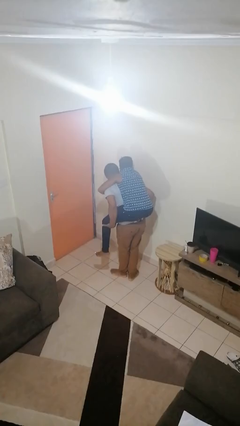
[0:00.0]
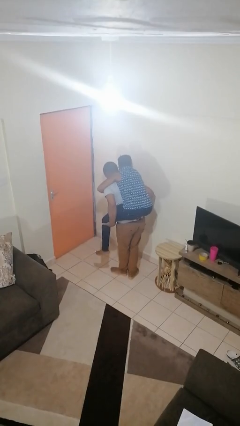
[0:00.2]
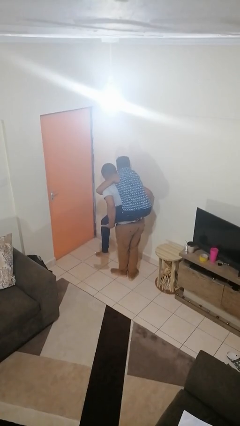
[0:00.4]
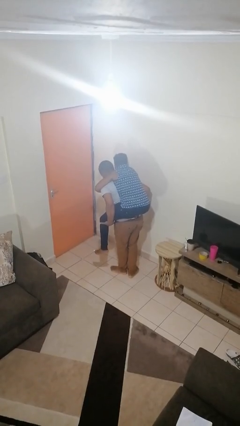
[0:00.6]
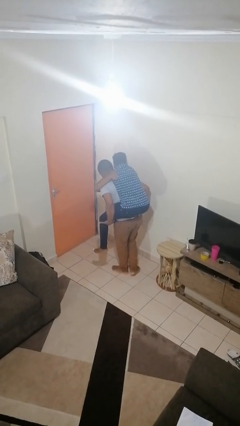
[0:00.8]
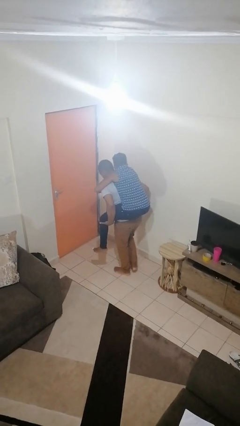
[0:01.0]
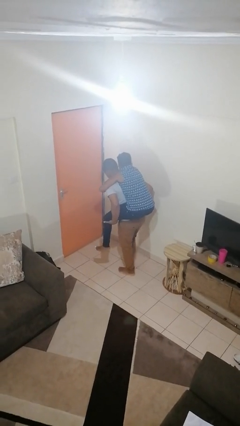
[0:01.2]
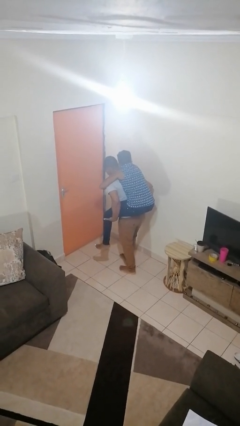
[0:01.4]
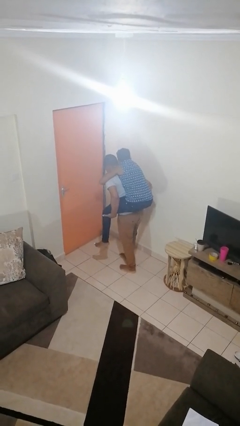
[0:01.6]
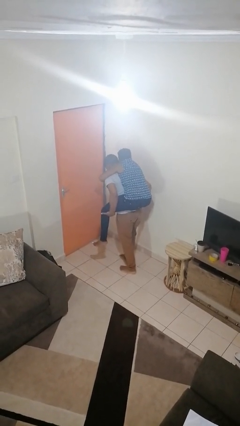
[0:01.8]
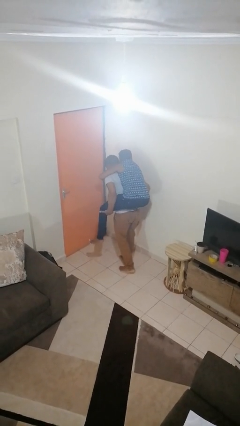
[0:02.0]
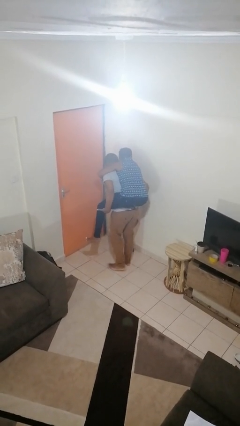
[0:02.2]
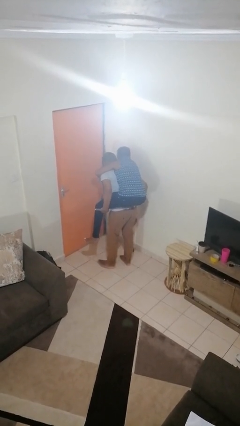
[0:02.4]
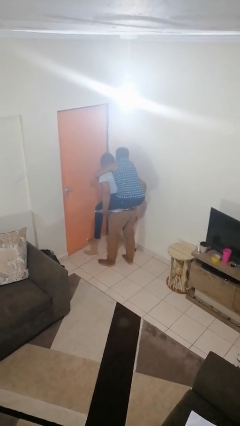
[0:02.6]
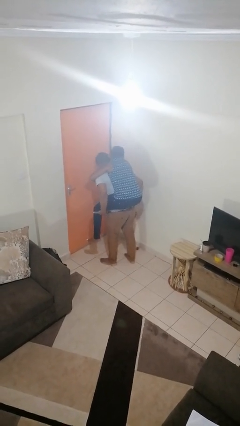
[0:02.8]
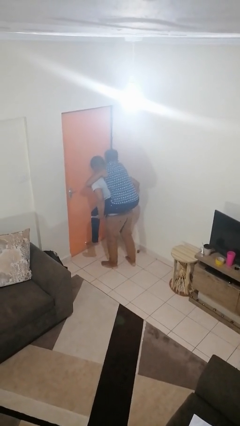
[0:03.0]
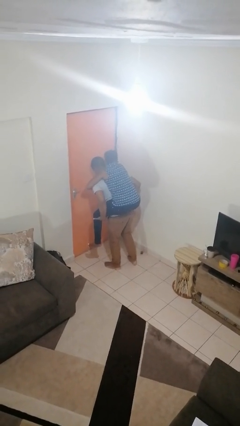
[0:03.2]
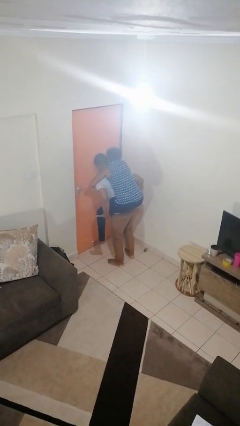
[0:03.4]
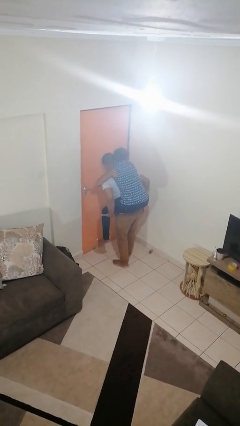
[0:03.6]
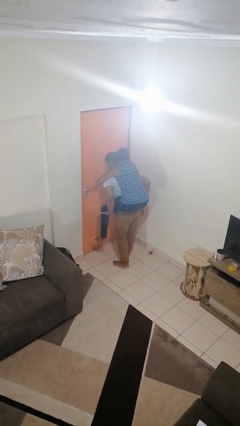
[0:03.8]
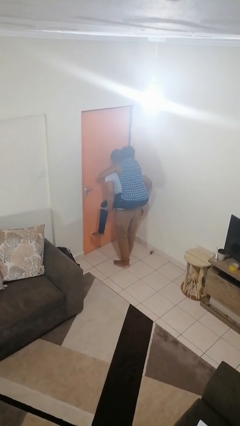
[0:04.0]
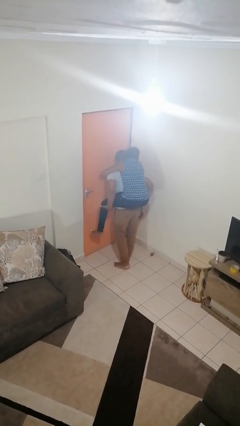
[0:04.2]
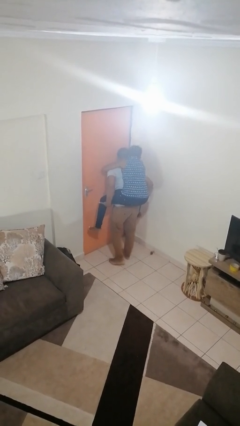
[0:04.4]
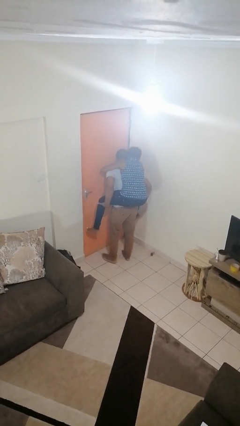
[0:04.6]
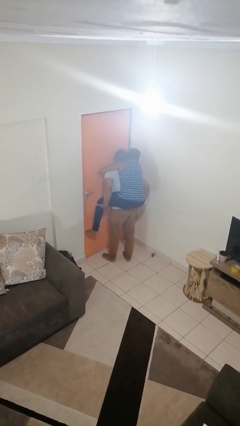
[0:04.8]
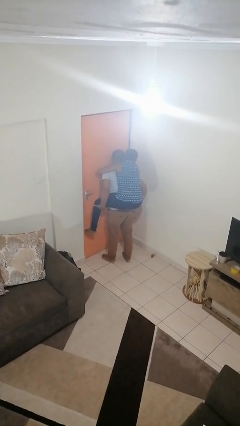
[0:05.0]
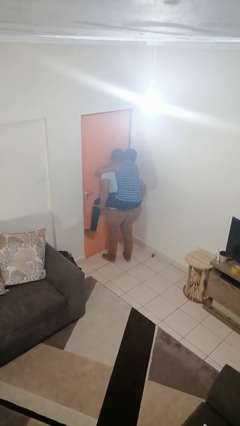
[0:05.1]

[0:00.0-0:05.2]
person carries person on back

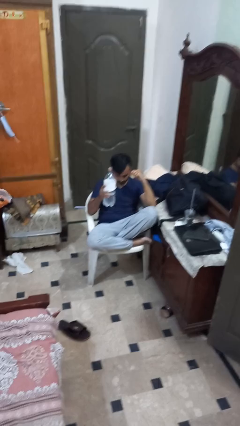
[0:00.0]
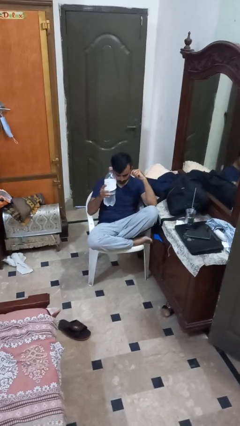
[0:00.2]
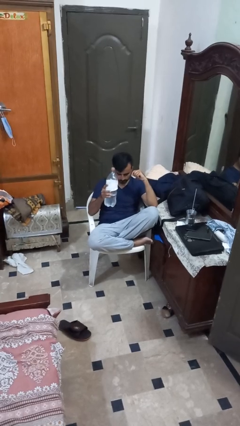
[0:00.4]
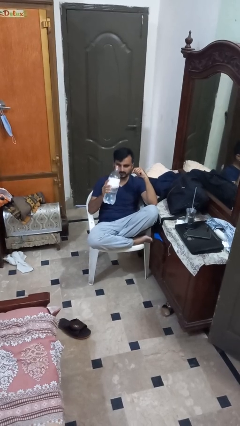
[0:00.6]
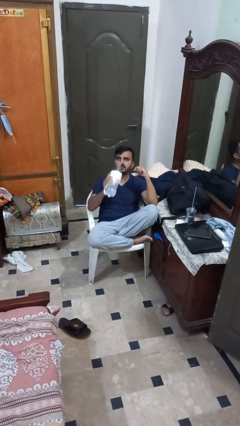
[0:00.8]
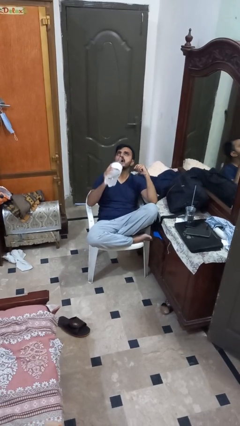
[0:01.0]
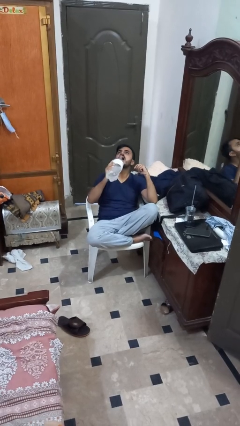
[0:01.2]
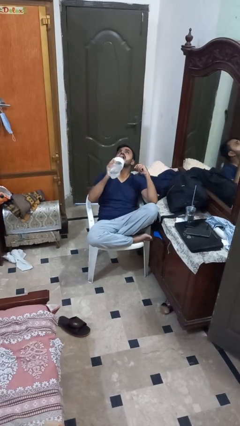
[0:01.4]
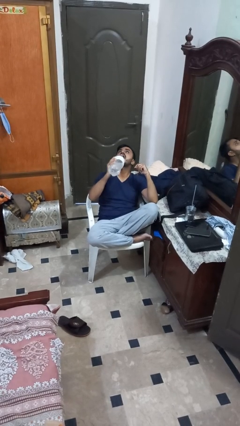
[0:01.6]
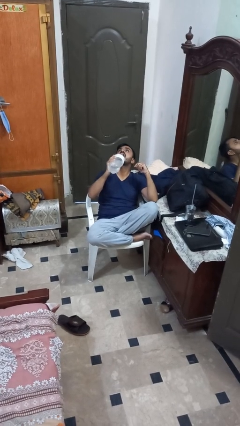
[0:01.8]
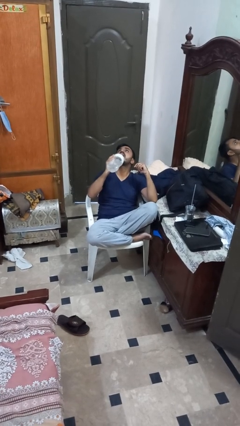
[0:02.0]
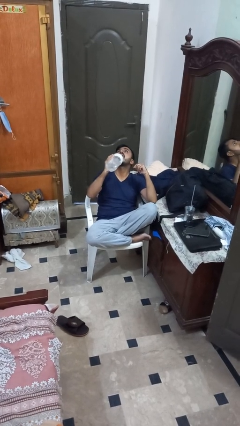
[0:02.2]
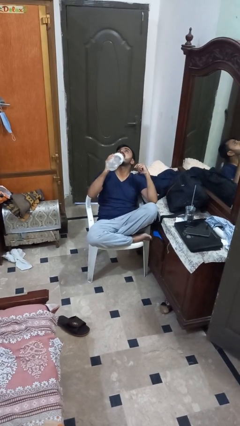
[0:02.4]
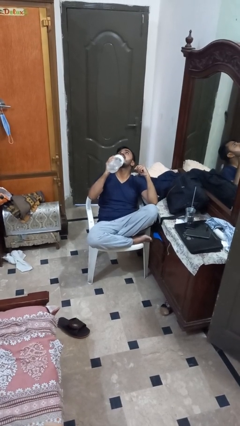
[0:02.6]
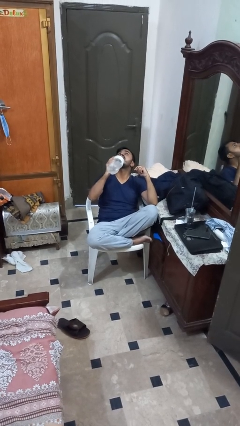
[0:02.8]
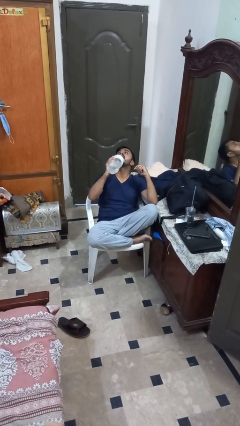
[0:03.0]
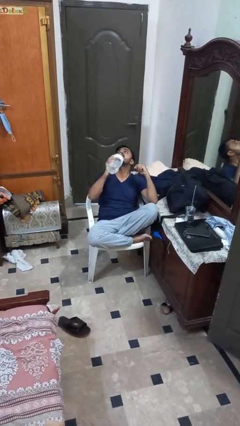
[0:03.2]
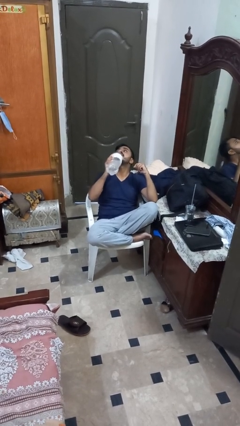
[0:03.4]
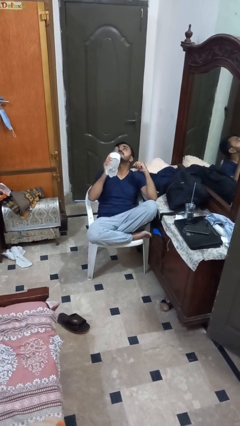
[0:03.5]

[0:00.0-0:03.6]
person drinks from bottle

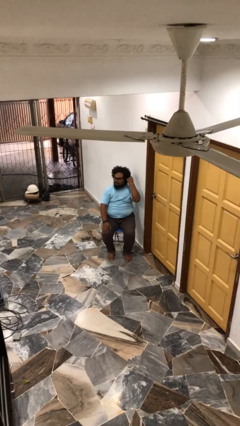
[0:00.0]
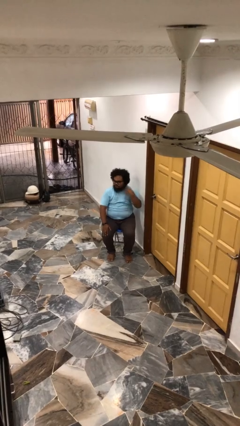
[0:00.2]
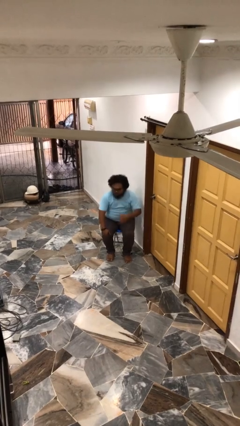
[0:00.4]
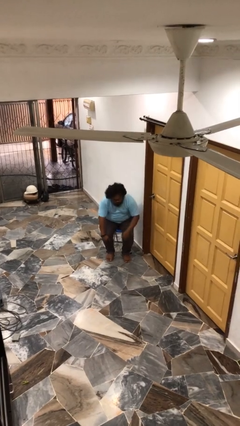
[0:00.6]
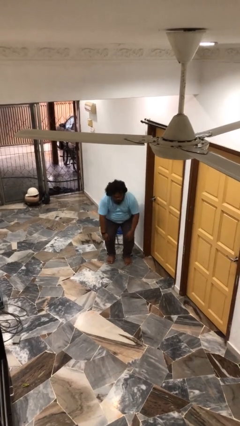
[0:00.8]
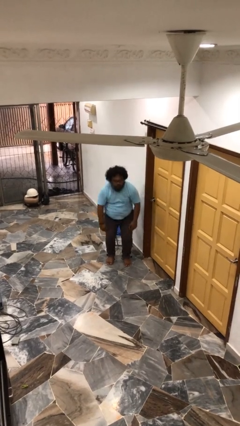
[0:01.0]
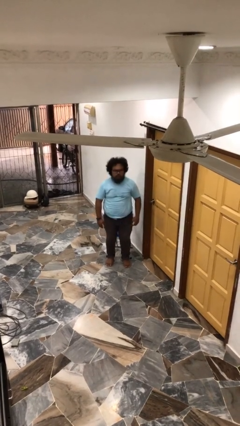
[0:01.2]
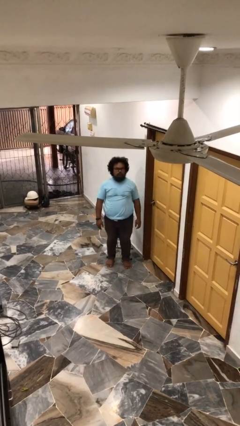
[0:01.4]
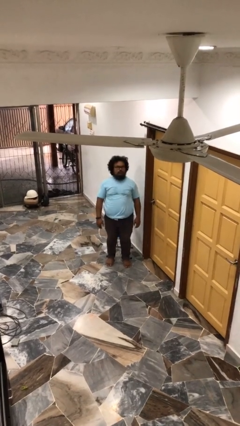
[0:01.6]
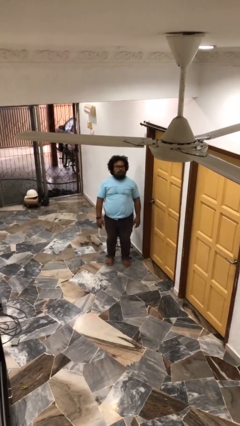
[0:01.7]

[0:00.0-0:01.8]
person stands up

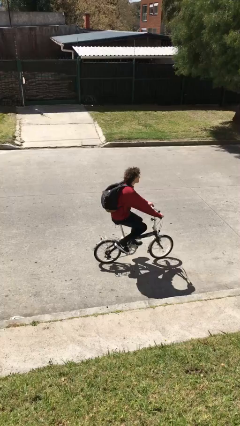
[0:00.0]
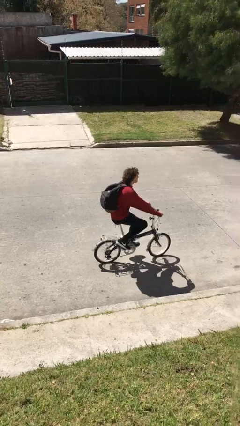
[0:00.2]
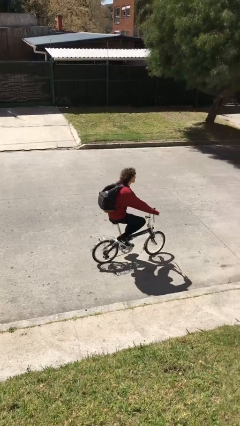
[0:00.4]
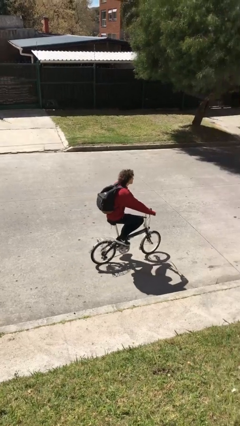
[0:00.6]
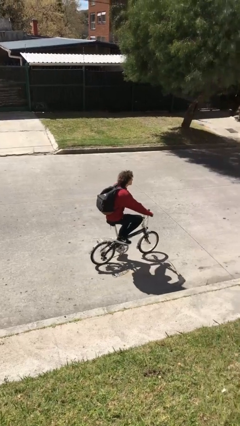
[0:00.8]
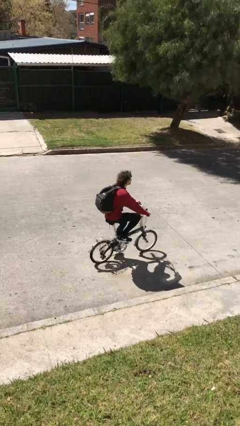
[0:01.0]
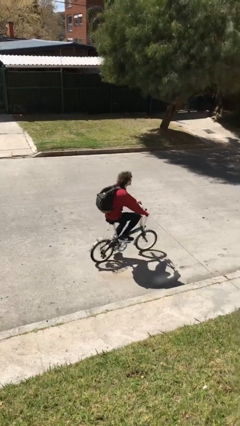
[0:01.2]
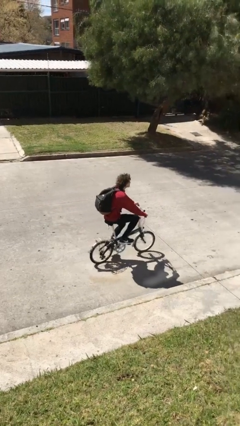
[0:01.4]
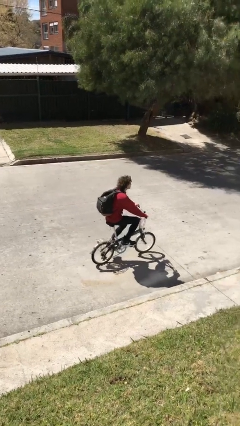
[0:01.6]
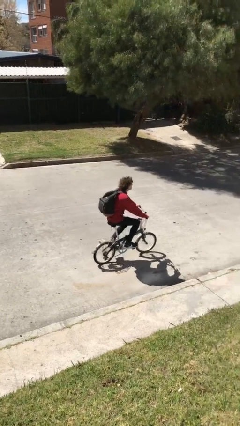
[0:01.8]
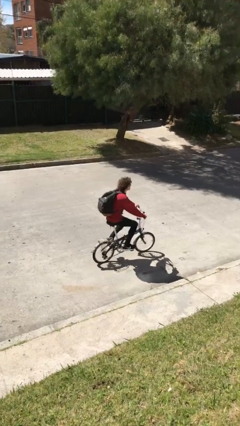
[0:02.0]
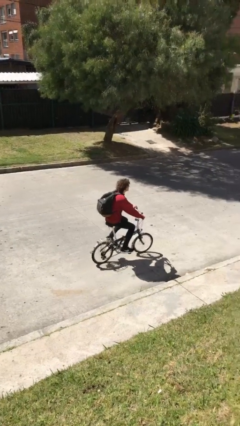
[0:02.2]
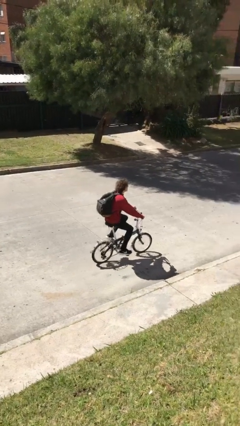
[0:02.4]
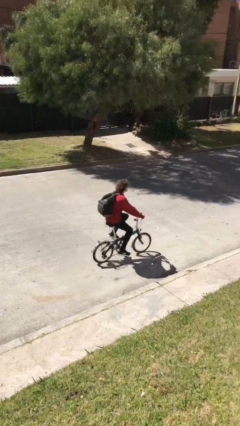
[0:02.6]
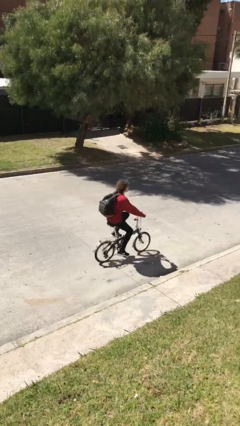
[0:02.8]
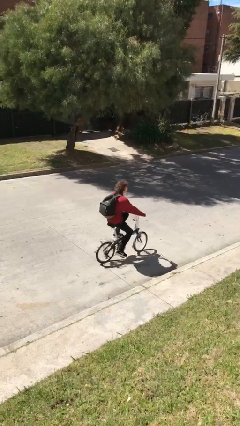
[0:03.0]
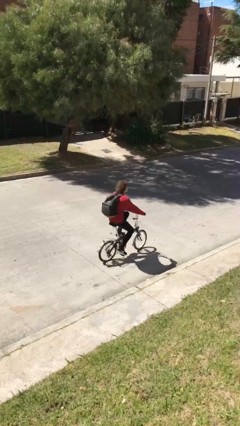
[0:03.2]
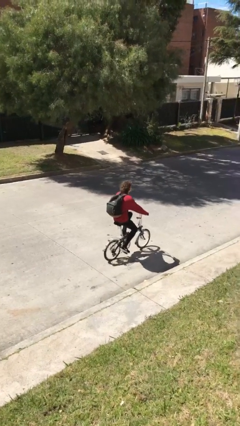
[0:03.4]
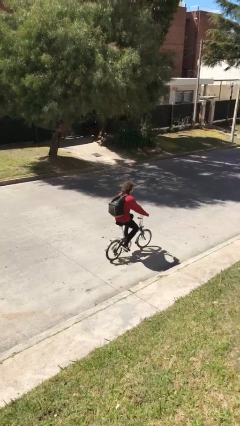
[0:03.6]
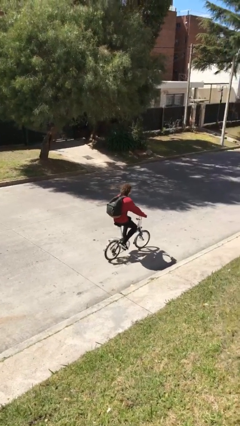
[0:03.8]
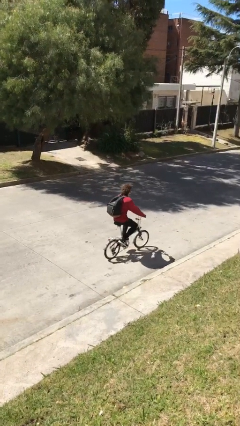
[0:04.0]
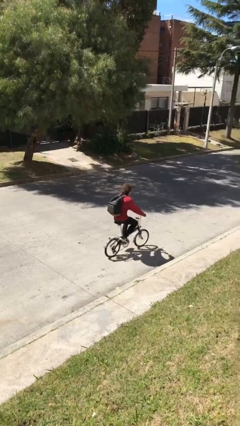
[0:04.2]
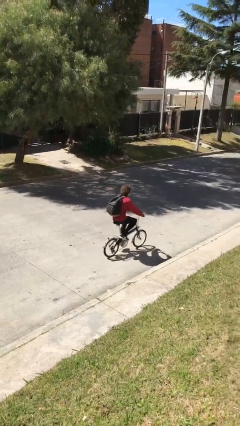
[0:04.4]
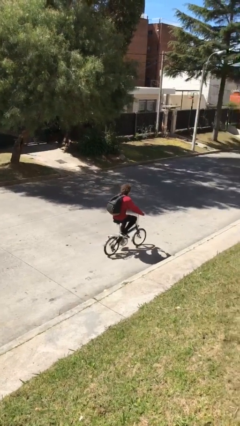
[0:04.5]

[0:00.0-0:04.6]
person rides bicycle

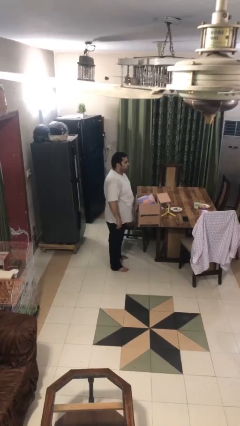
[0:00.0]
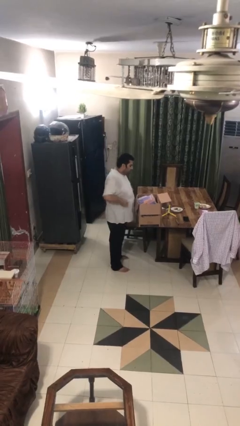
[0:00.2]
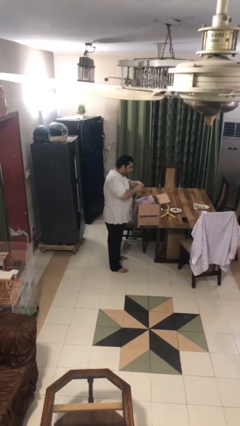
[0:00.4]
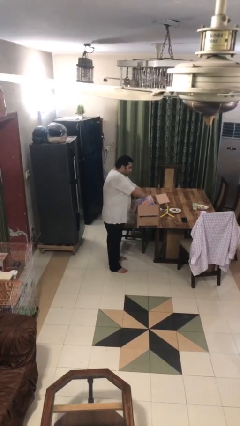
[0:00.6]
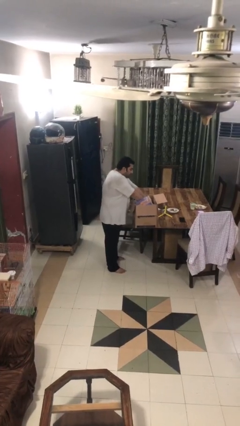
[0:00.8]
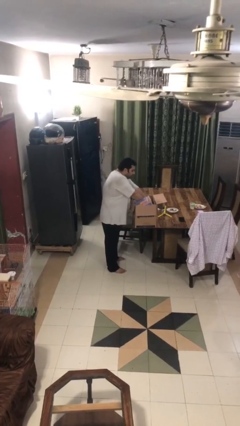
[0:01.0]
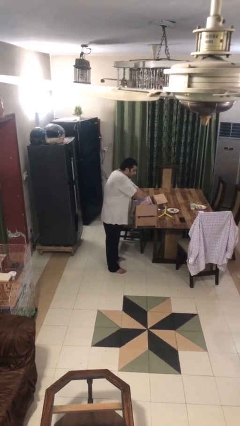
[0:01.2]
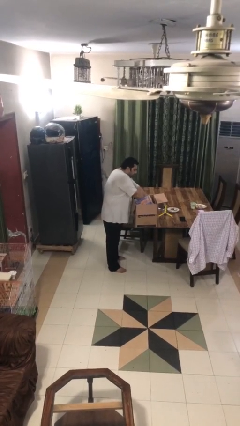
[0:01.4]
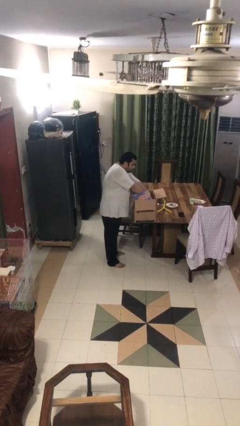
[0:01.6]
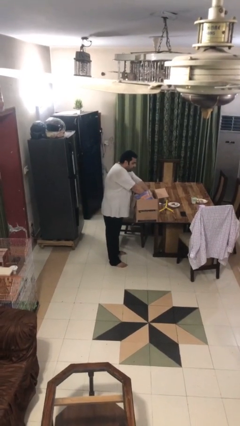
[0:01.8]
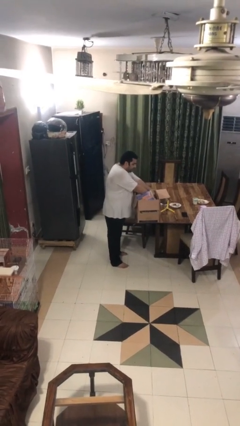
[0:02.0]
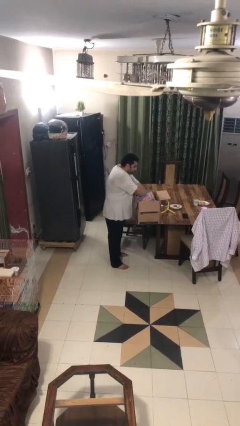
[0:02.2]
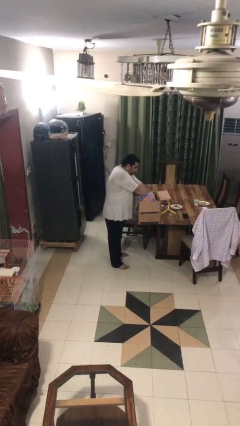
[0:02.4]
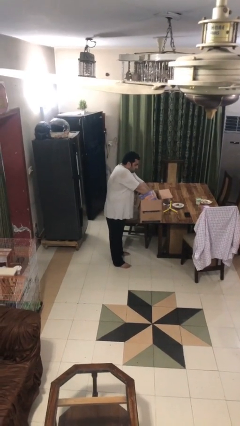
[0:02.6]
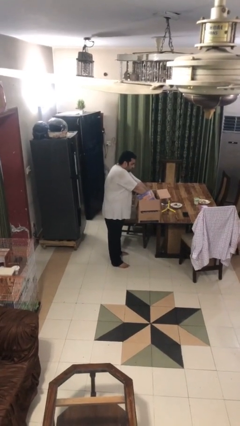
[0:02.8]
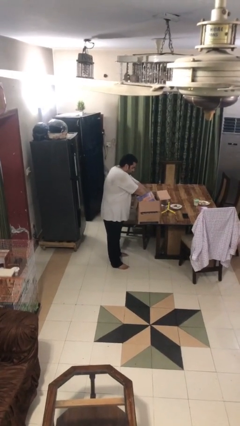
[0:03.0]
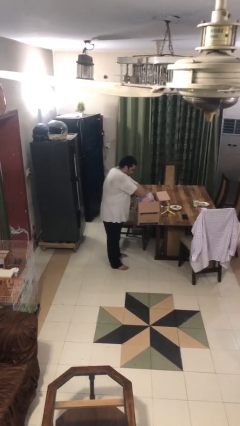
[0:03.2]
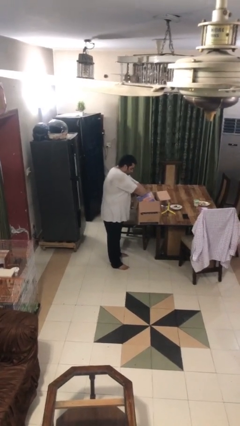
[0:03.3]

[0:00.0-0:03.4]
person searches in box
